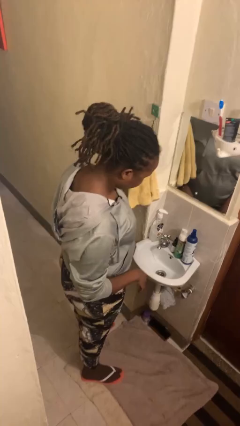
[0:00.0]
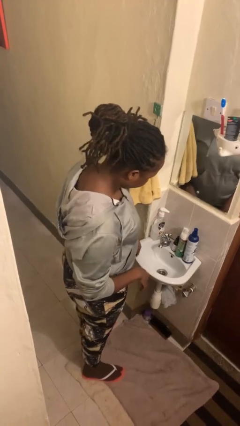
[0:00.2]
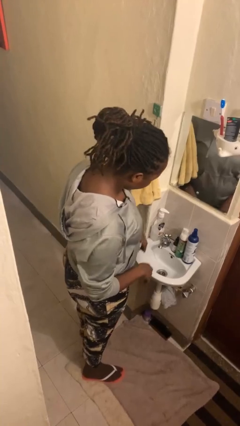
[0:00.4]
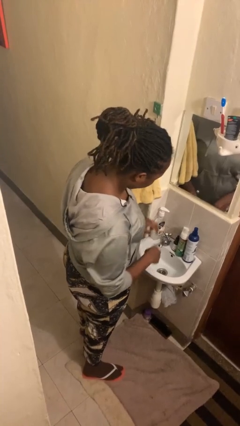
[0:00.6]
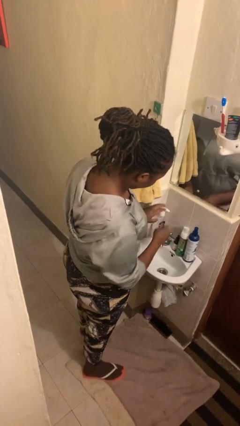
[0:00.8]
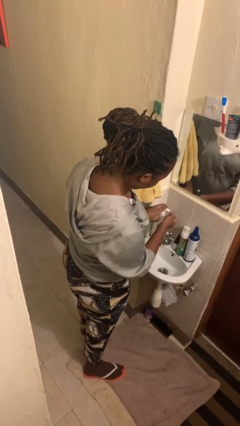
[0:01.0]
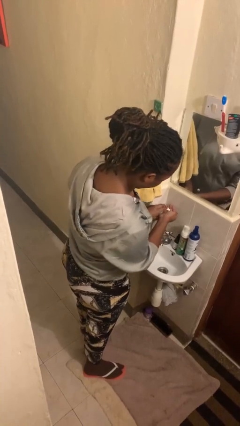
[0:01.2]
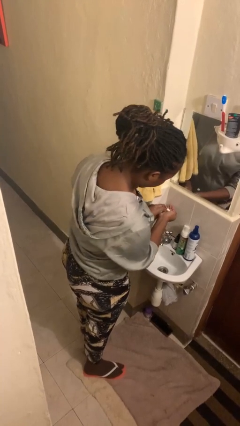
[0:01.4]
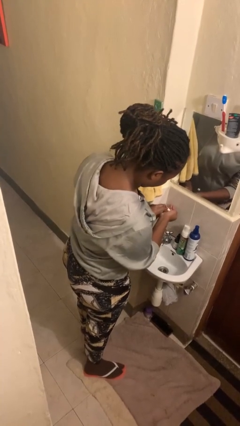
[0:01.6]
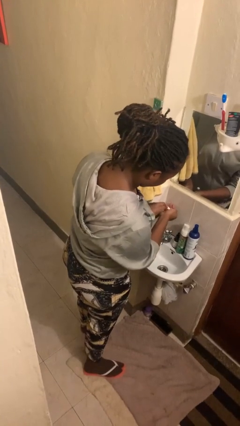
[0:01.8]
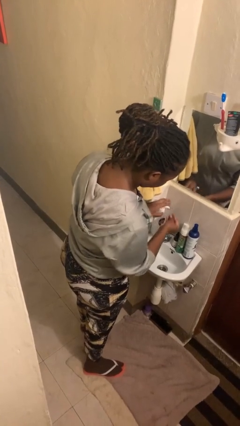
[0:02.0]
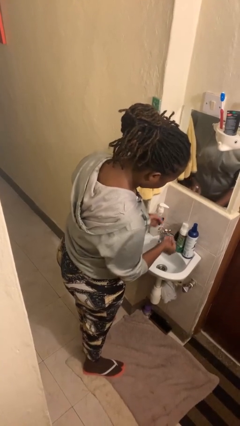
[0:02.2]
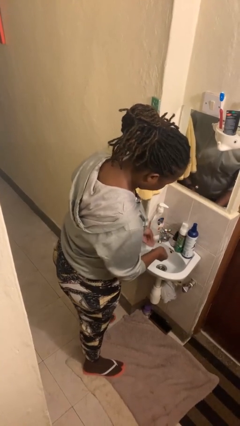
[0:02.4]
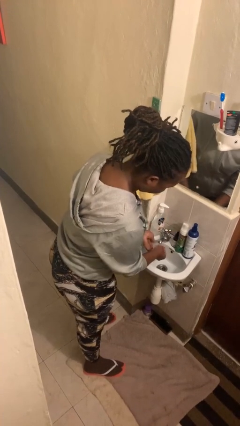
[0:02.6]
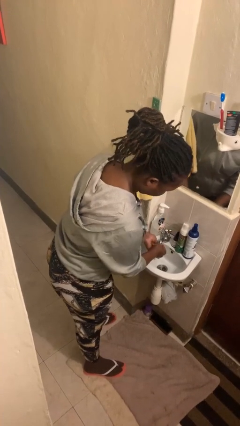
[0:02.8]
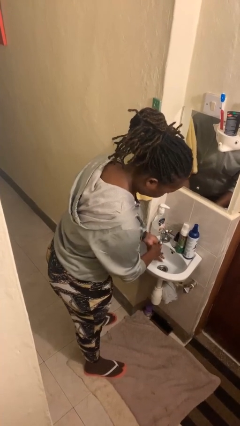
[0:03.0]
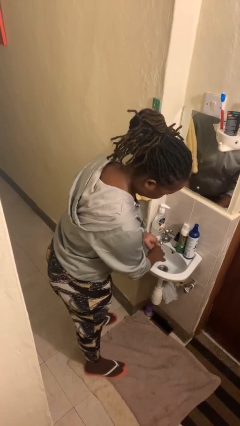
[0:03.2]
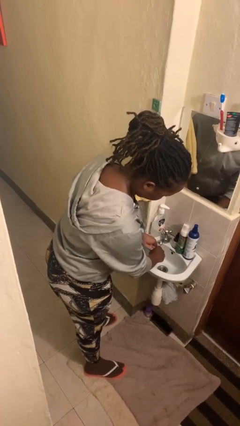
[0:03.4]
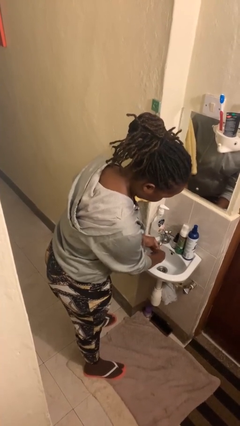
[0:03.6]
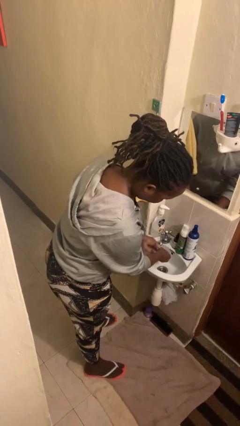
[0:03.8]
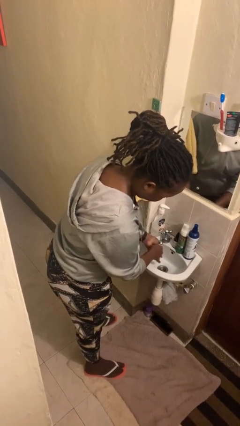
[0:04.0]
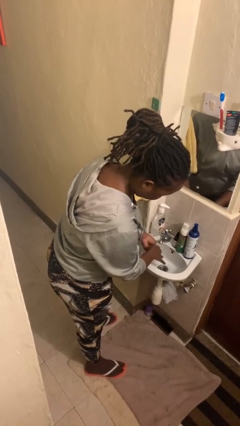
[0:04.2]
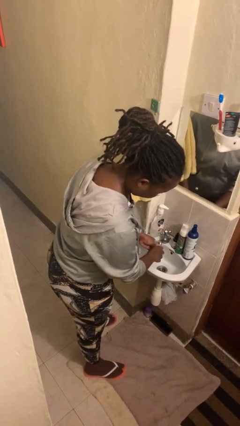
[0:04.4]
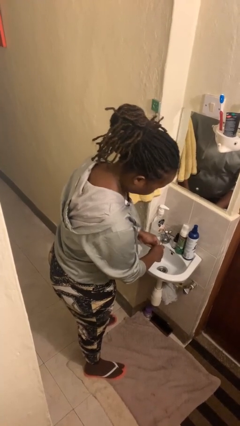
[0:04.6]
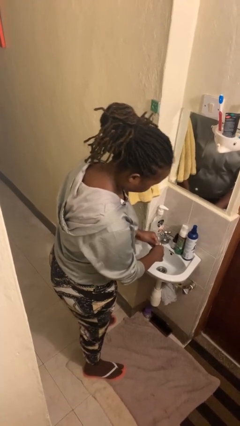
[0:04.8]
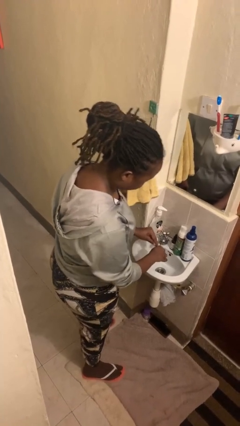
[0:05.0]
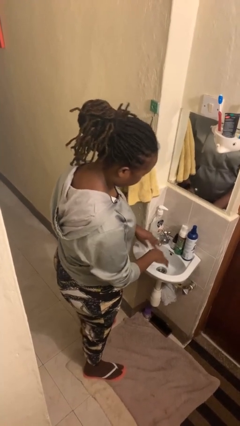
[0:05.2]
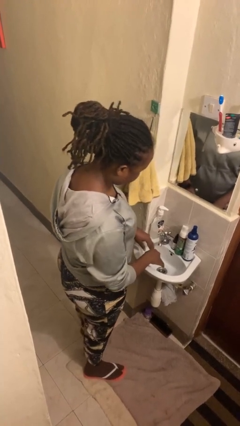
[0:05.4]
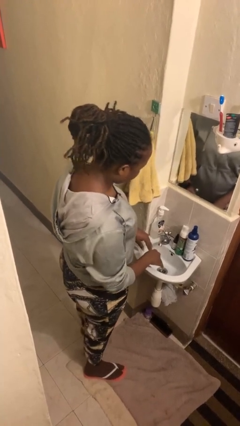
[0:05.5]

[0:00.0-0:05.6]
person washes hands

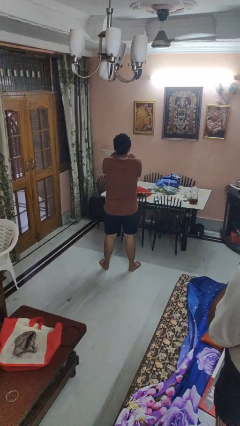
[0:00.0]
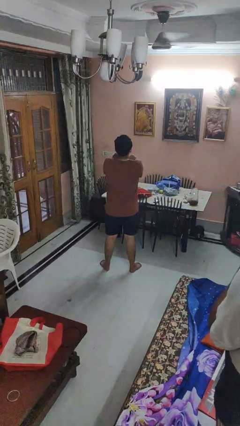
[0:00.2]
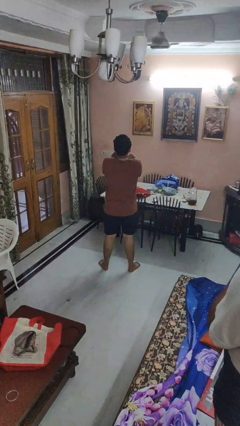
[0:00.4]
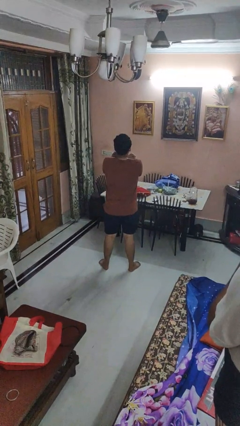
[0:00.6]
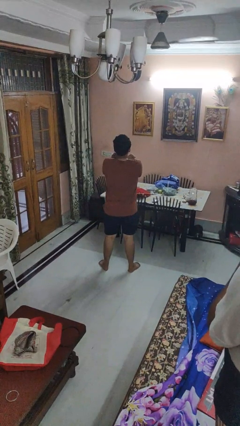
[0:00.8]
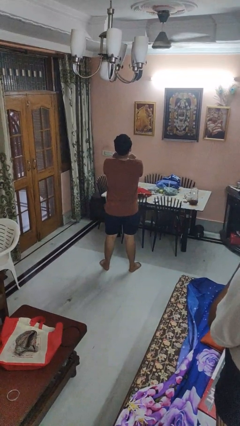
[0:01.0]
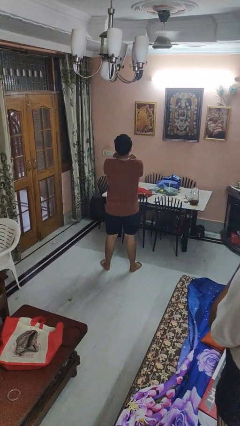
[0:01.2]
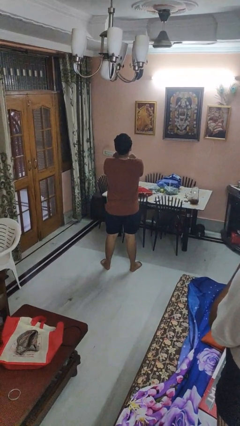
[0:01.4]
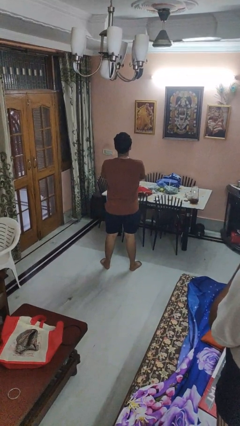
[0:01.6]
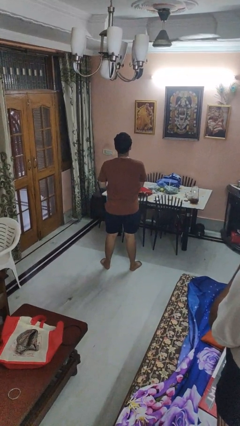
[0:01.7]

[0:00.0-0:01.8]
person gestures arms x

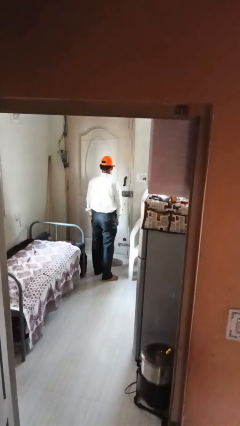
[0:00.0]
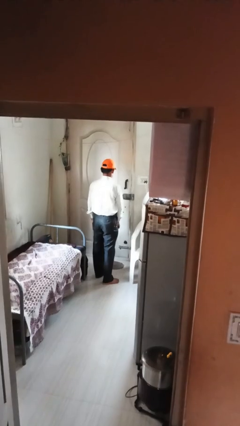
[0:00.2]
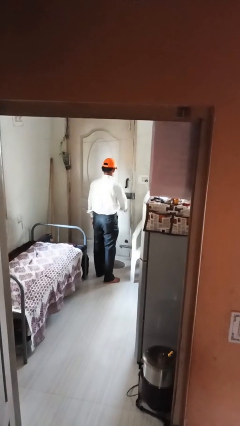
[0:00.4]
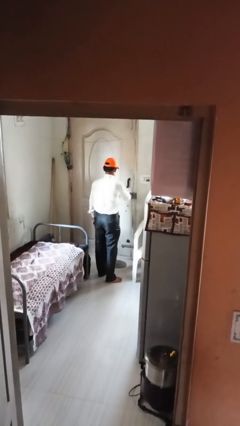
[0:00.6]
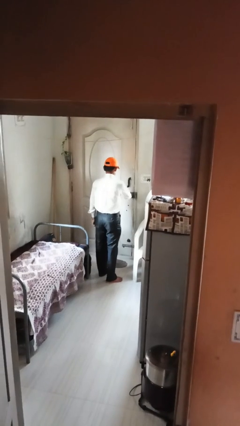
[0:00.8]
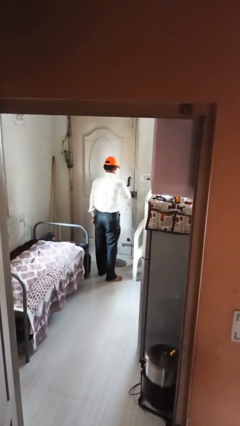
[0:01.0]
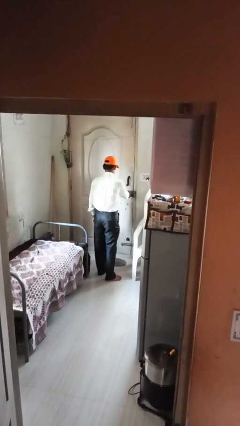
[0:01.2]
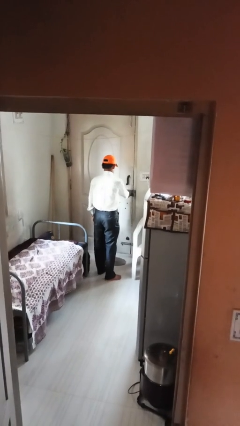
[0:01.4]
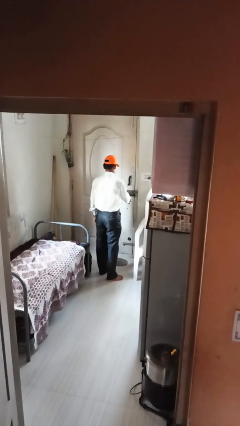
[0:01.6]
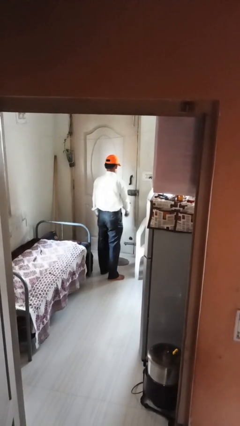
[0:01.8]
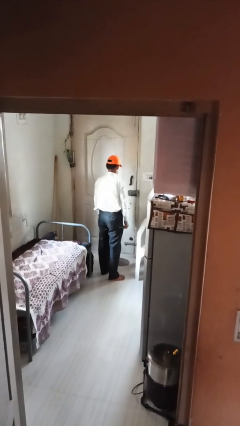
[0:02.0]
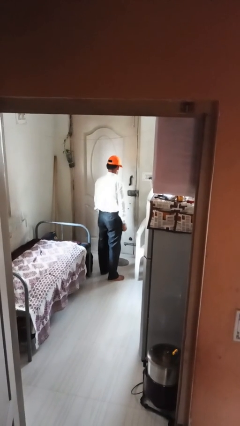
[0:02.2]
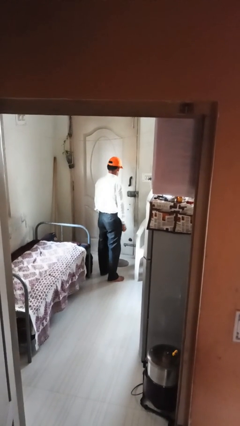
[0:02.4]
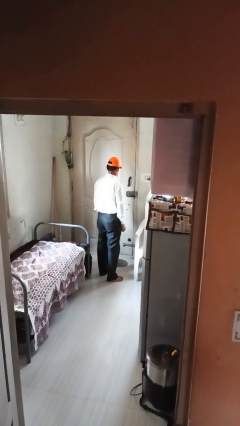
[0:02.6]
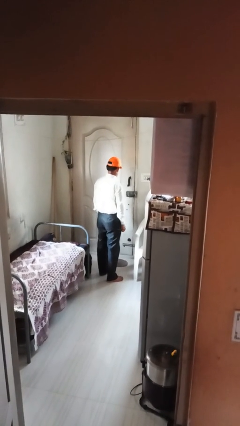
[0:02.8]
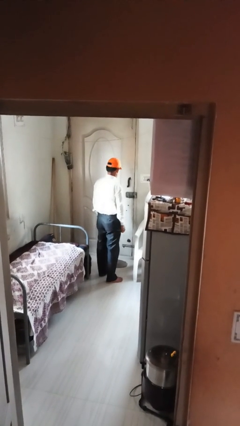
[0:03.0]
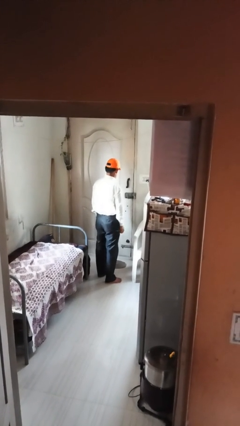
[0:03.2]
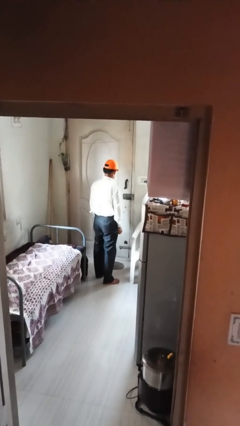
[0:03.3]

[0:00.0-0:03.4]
person locks door with keys

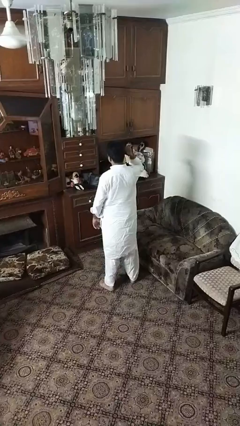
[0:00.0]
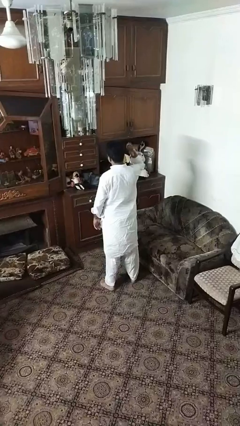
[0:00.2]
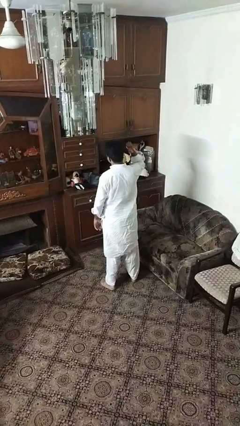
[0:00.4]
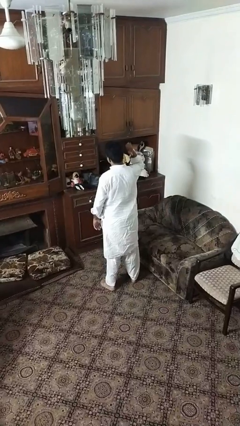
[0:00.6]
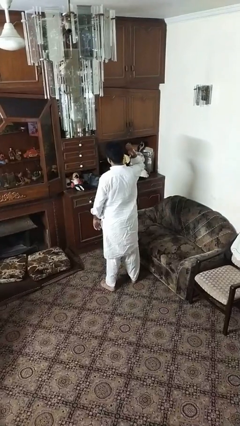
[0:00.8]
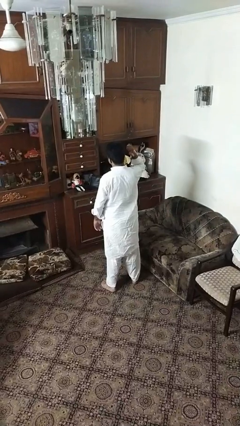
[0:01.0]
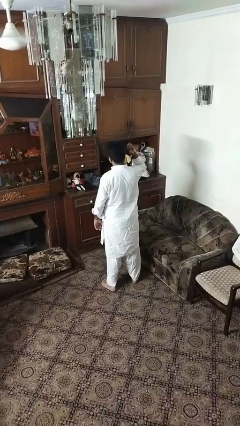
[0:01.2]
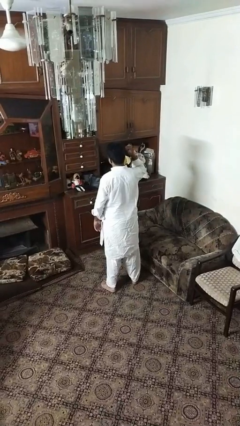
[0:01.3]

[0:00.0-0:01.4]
person gestures behind me

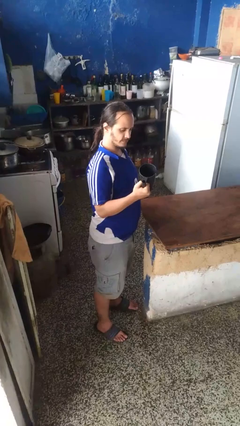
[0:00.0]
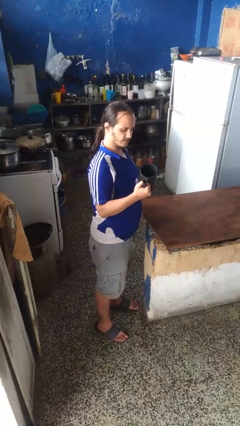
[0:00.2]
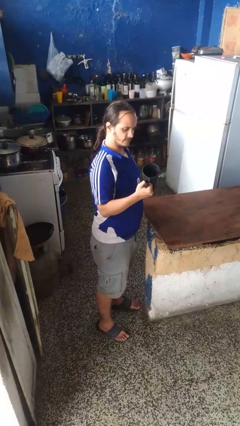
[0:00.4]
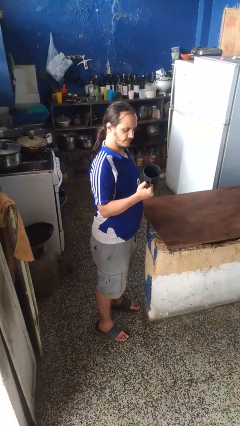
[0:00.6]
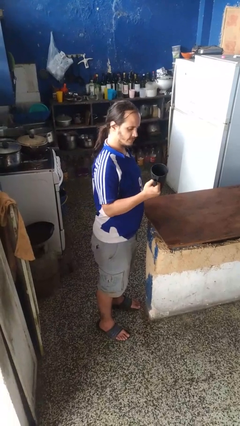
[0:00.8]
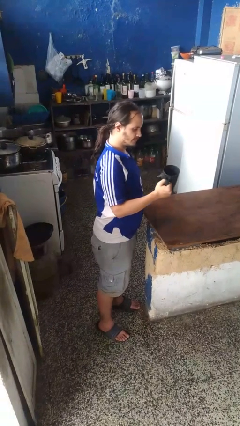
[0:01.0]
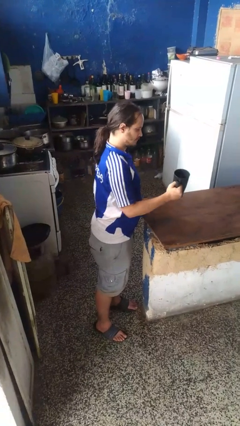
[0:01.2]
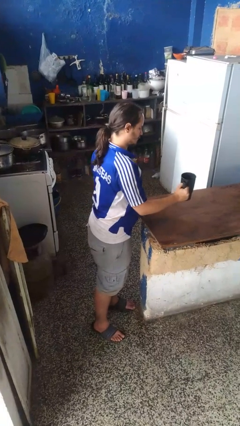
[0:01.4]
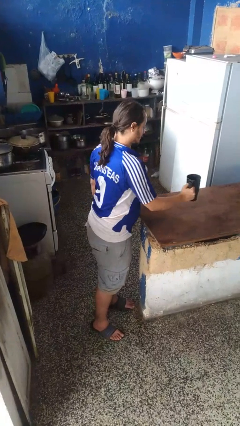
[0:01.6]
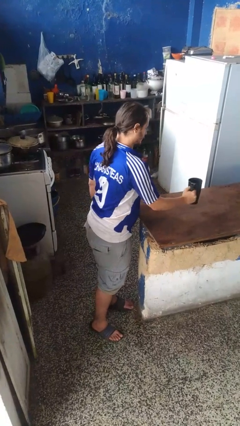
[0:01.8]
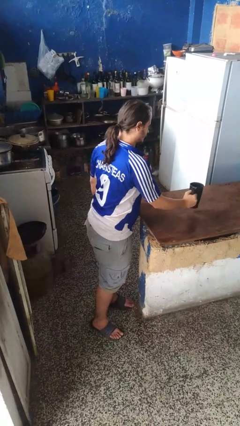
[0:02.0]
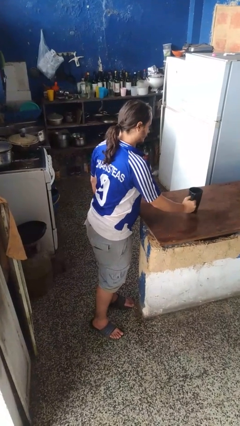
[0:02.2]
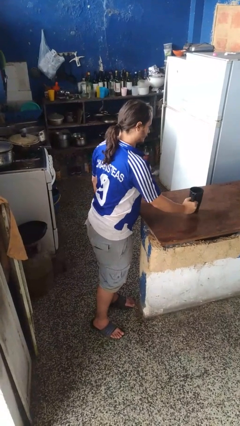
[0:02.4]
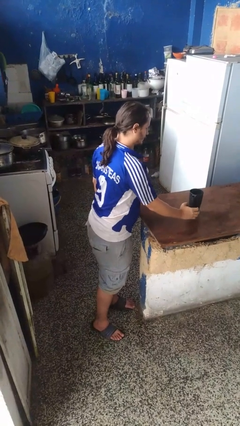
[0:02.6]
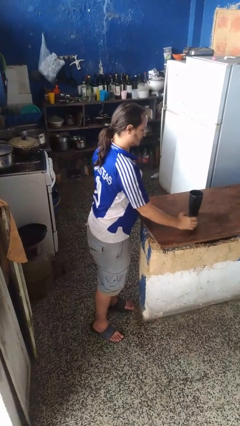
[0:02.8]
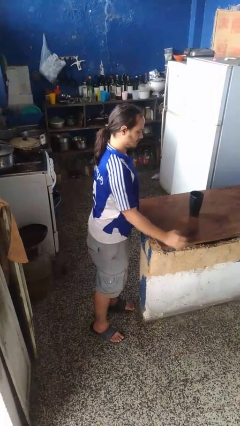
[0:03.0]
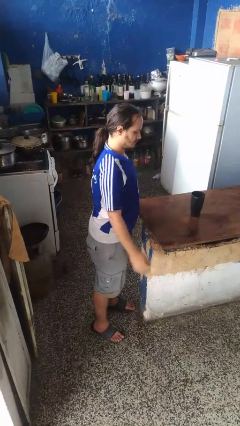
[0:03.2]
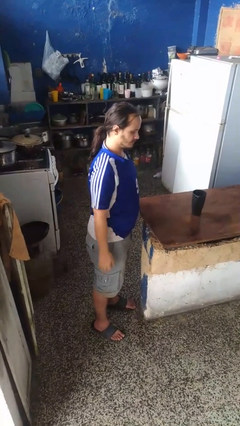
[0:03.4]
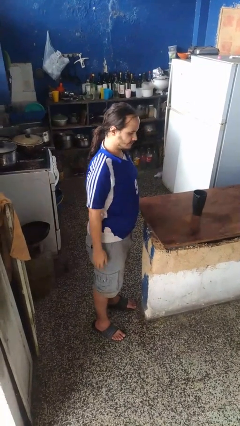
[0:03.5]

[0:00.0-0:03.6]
person puts down object on countertop

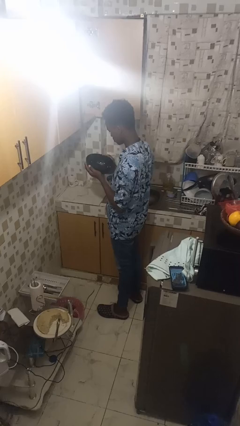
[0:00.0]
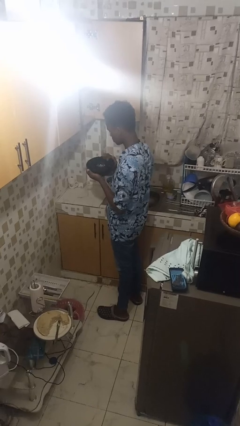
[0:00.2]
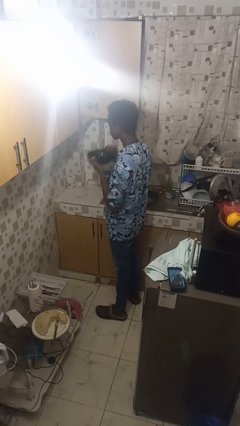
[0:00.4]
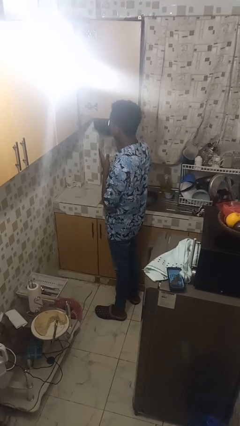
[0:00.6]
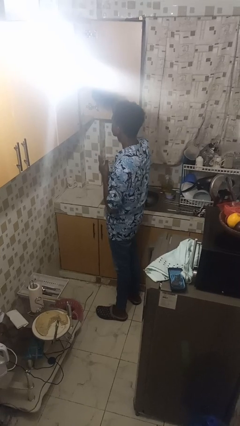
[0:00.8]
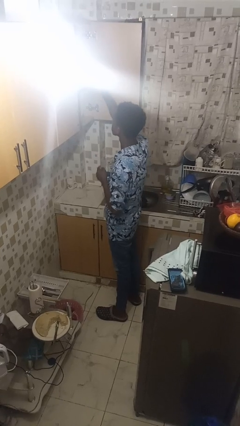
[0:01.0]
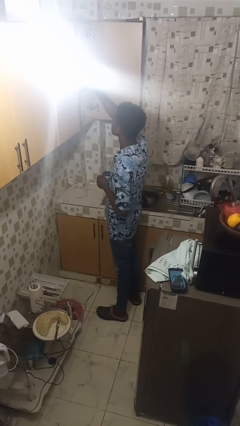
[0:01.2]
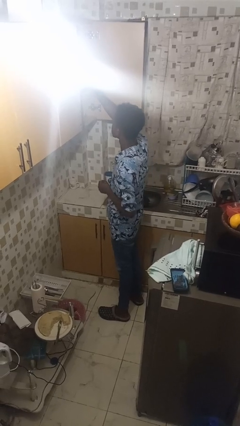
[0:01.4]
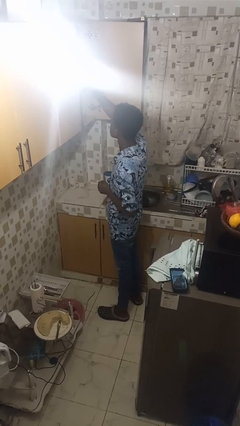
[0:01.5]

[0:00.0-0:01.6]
person puts down object into cabinet
